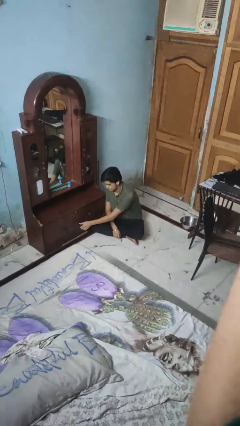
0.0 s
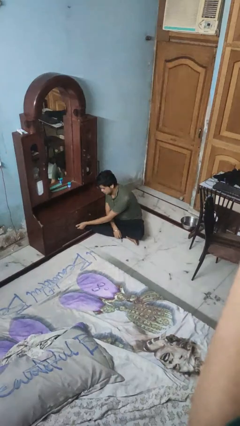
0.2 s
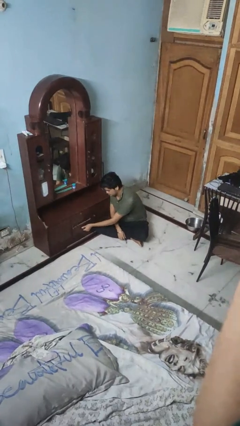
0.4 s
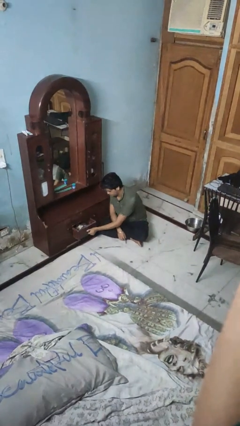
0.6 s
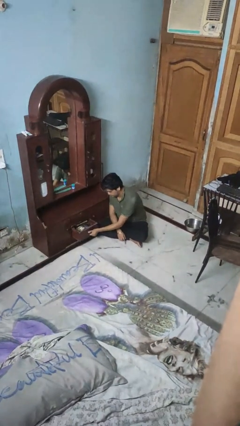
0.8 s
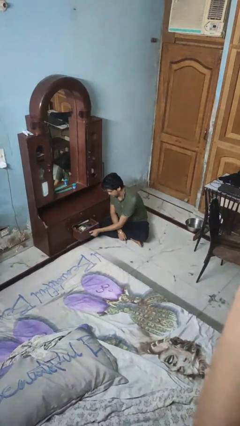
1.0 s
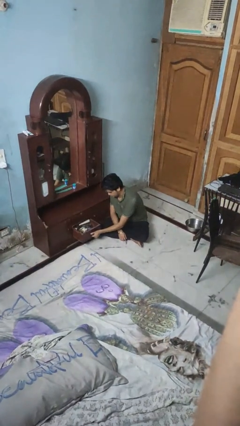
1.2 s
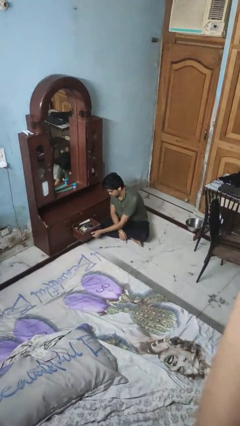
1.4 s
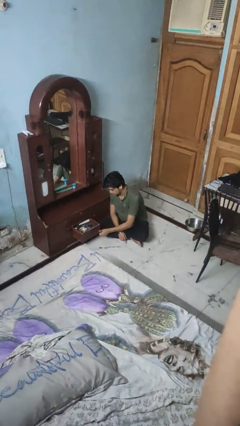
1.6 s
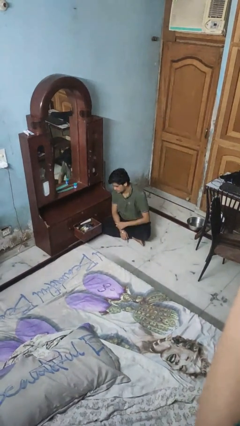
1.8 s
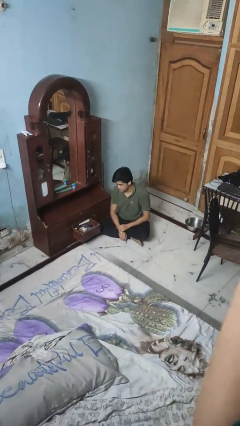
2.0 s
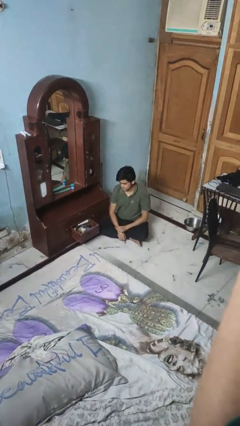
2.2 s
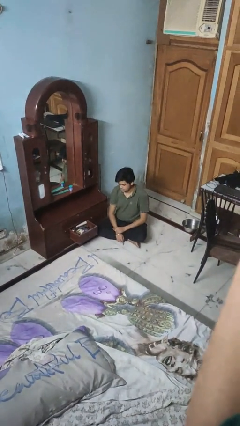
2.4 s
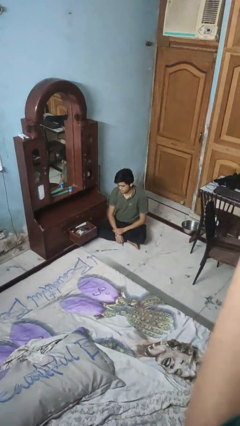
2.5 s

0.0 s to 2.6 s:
person opens dresser drawer

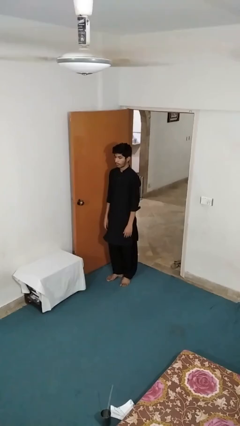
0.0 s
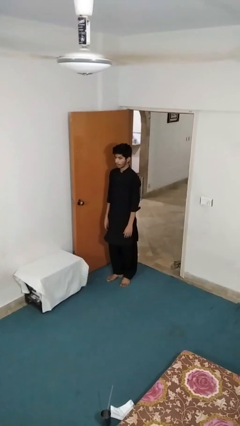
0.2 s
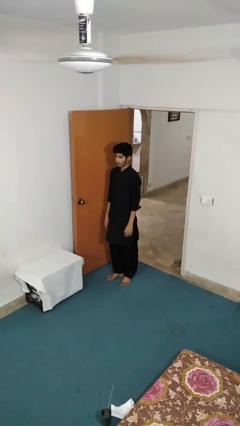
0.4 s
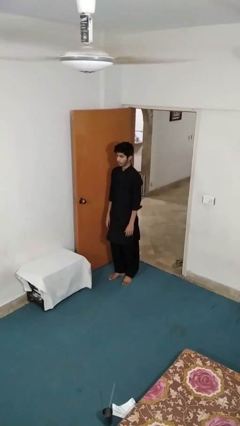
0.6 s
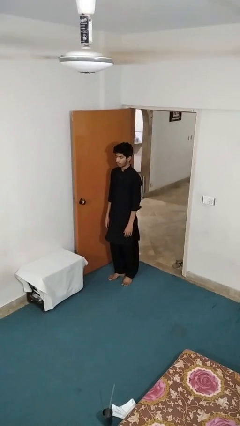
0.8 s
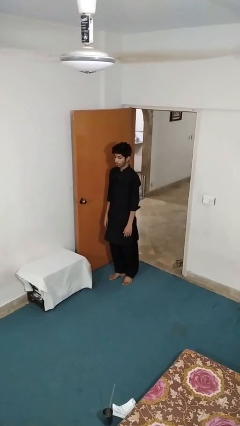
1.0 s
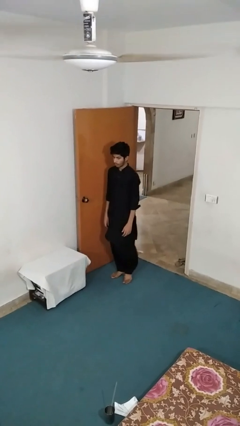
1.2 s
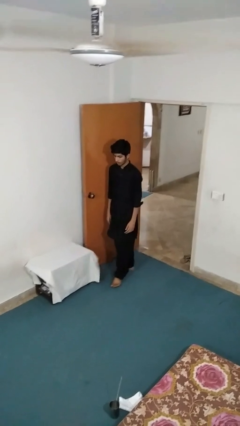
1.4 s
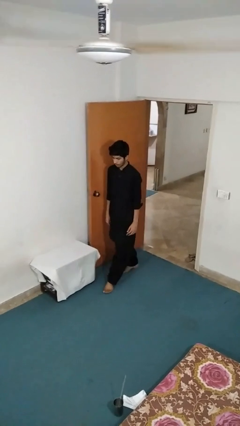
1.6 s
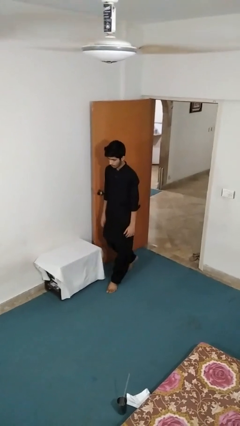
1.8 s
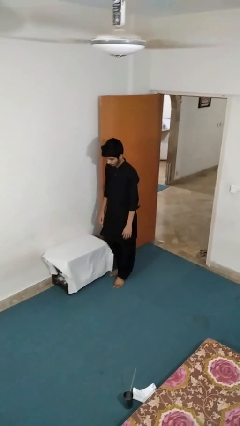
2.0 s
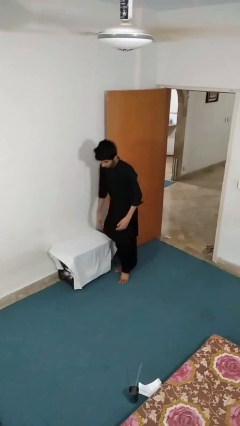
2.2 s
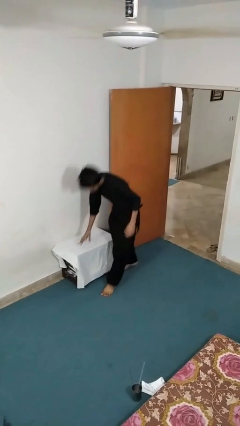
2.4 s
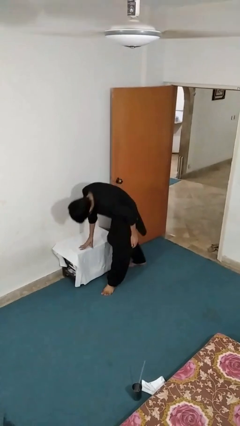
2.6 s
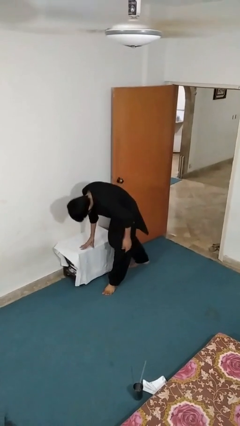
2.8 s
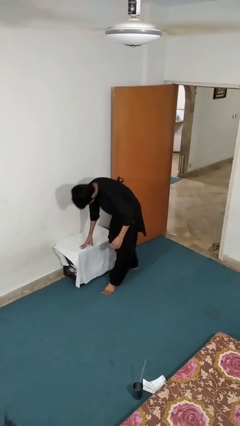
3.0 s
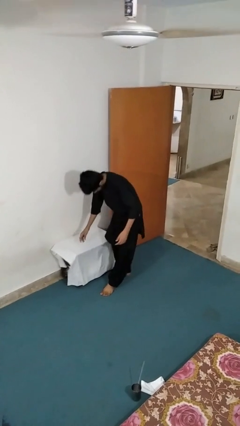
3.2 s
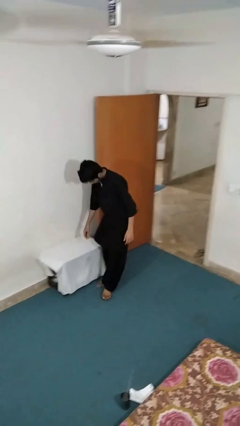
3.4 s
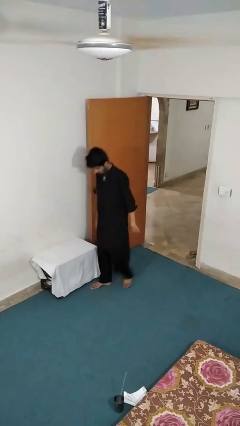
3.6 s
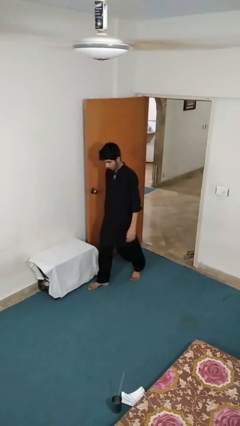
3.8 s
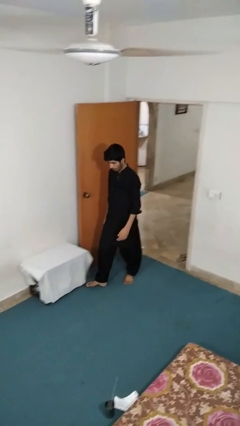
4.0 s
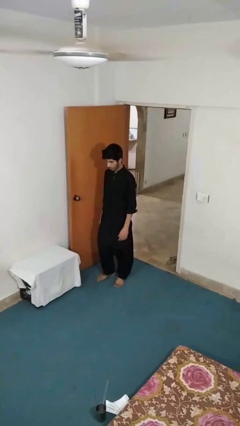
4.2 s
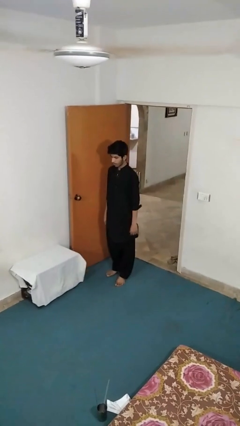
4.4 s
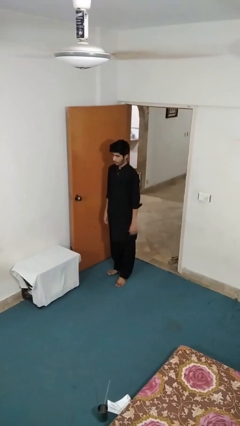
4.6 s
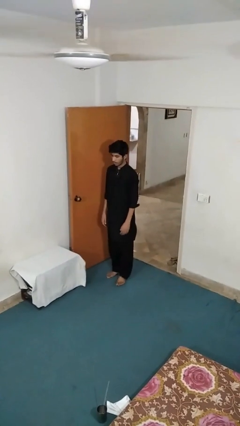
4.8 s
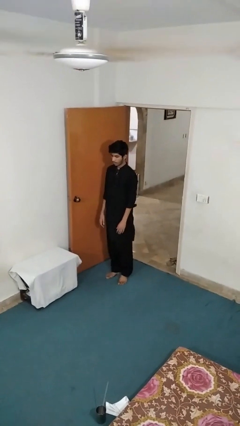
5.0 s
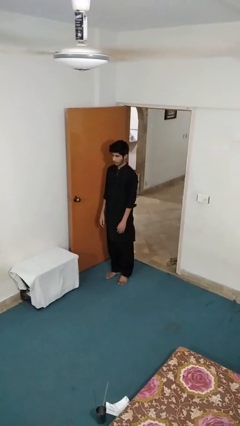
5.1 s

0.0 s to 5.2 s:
person bumps into table

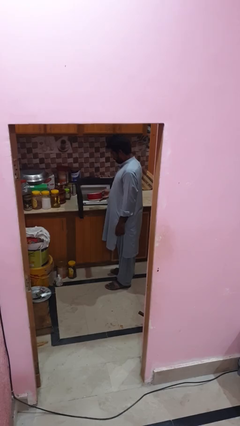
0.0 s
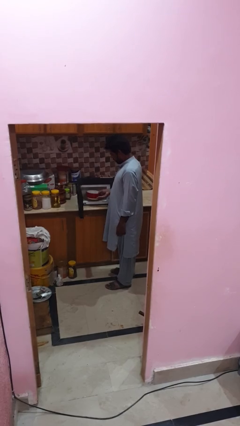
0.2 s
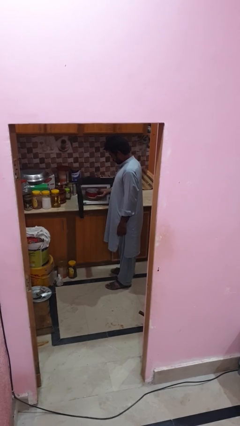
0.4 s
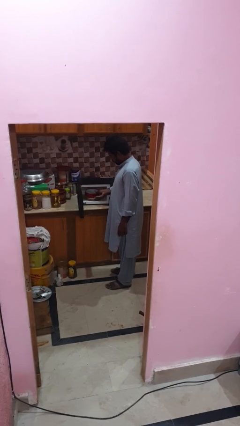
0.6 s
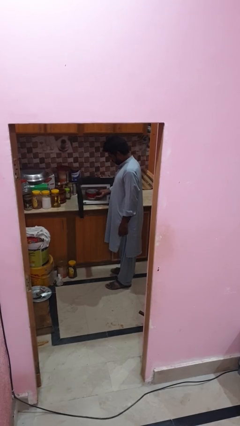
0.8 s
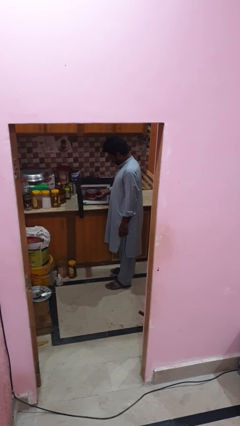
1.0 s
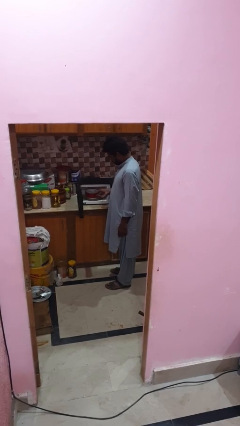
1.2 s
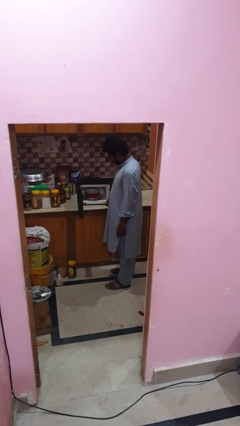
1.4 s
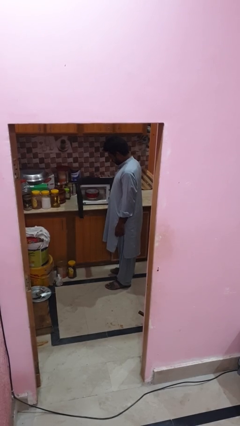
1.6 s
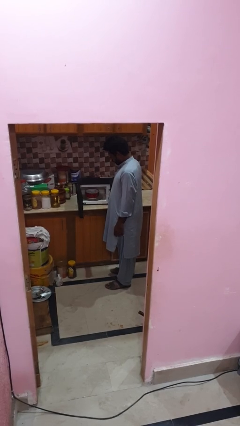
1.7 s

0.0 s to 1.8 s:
person puts object into microwave

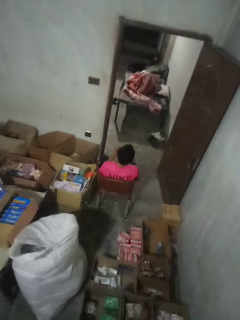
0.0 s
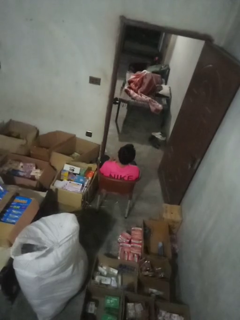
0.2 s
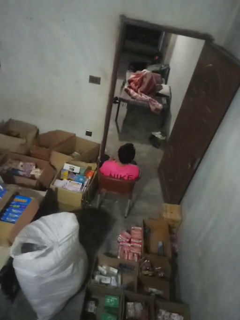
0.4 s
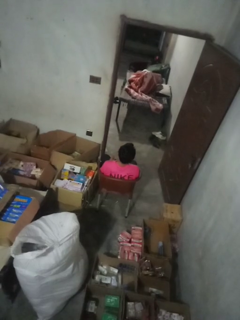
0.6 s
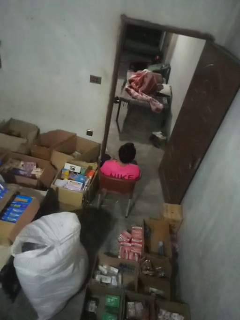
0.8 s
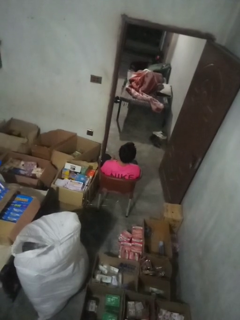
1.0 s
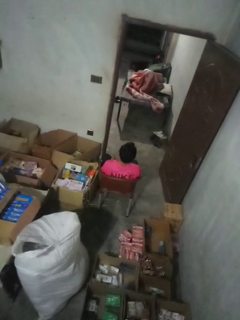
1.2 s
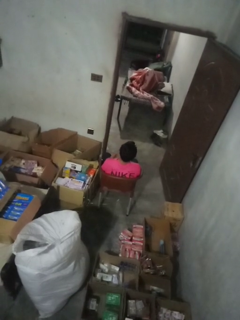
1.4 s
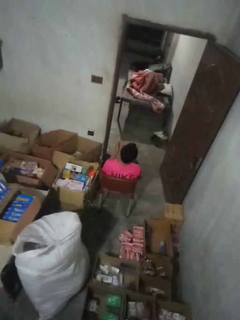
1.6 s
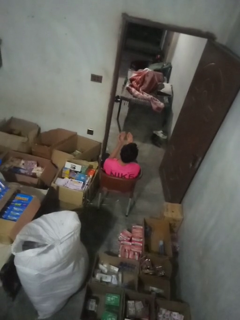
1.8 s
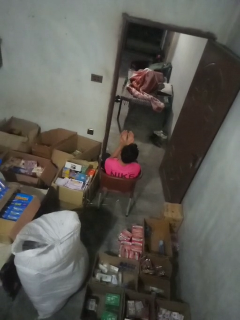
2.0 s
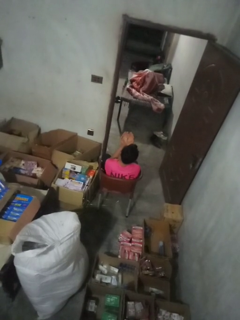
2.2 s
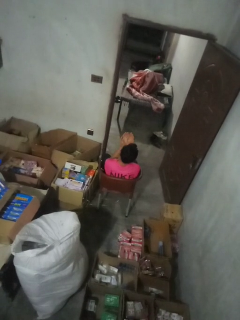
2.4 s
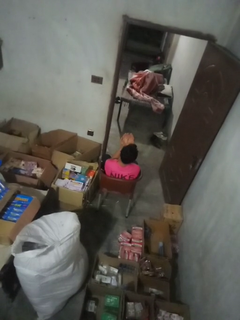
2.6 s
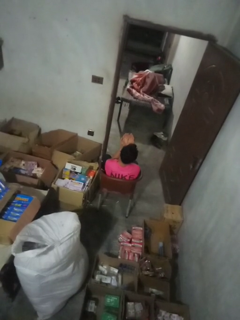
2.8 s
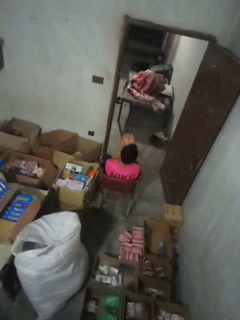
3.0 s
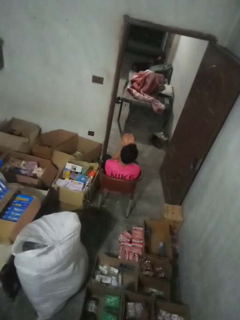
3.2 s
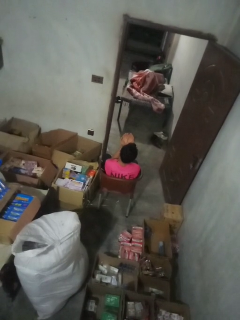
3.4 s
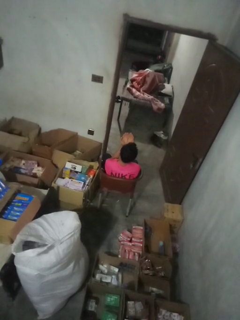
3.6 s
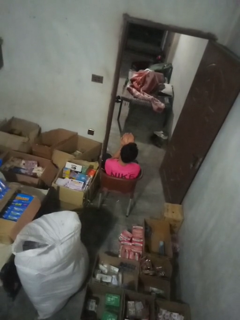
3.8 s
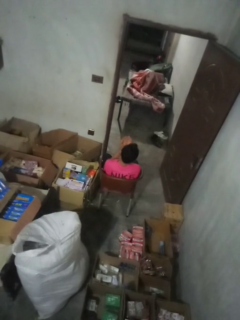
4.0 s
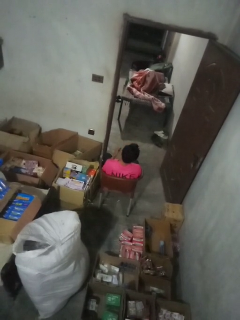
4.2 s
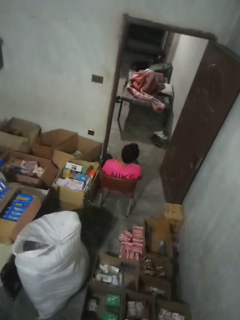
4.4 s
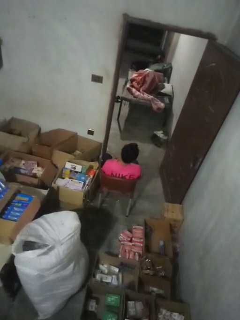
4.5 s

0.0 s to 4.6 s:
person prays

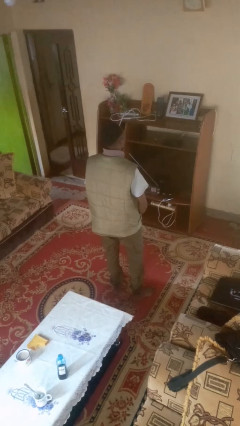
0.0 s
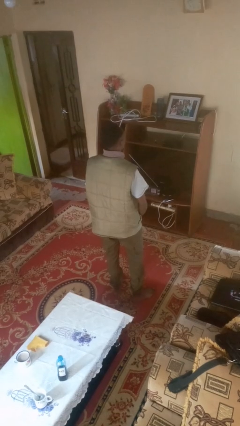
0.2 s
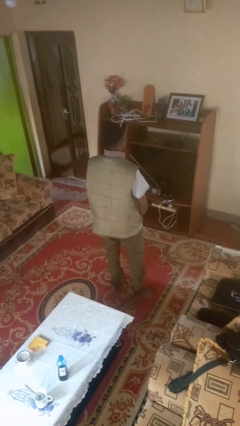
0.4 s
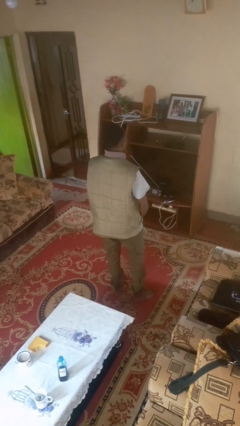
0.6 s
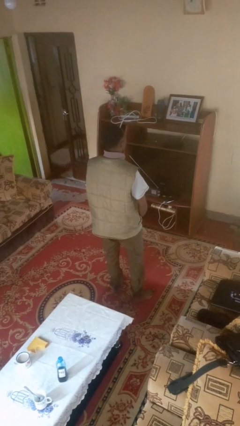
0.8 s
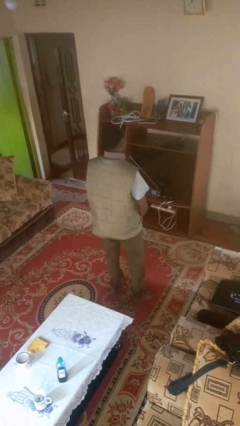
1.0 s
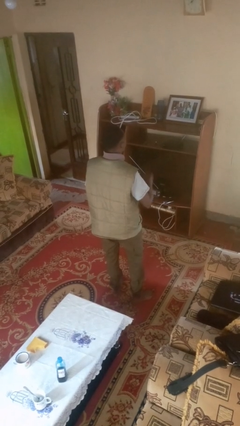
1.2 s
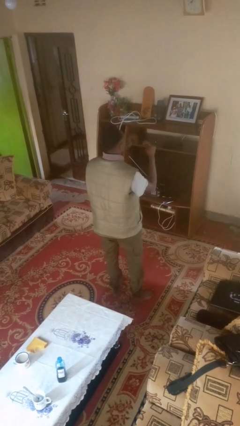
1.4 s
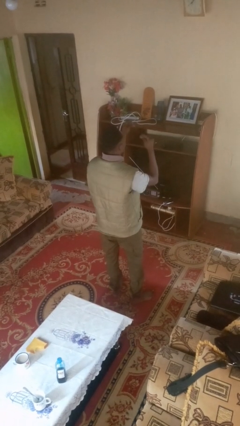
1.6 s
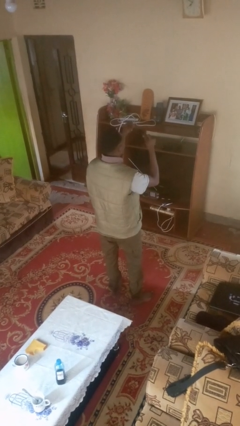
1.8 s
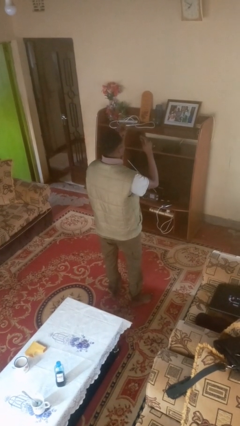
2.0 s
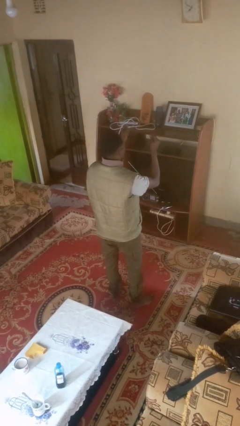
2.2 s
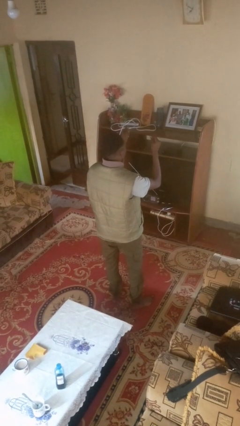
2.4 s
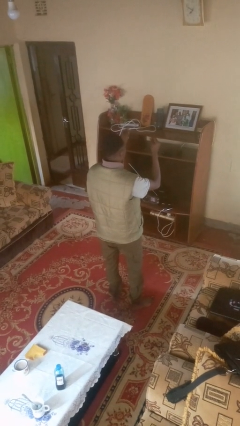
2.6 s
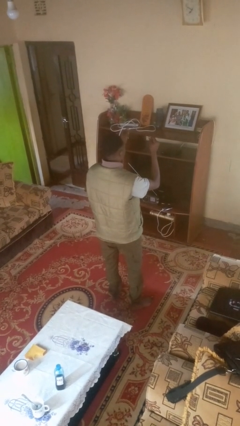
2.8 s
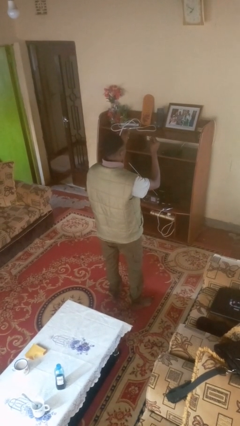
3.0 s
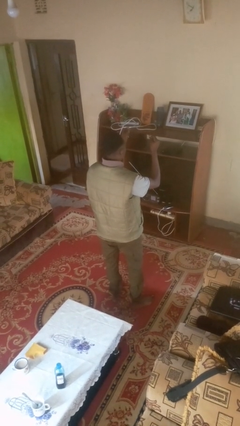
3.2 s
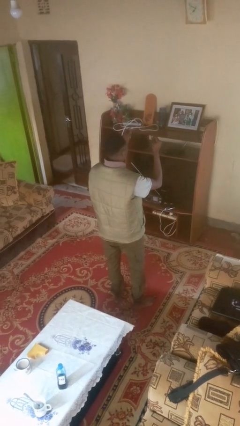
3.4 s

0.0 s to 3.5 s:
person snaps fingers

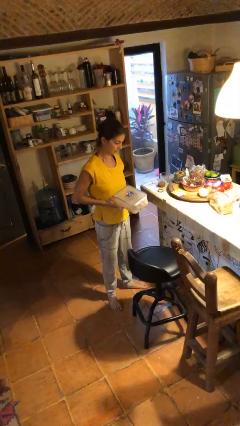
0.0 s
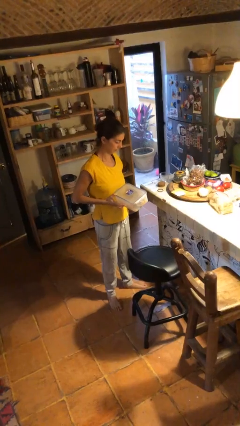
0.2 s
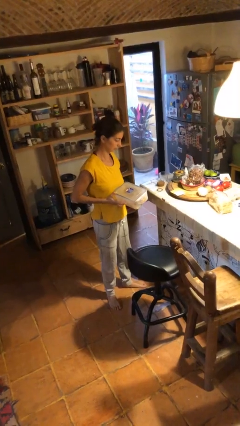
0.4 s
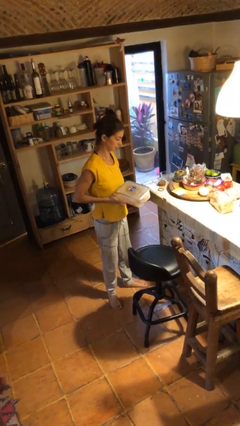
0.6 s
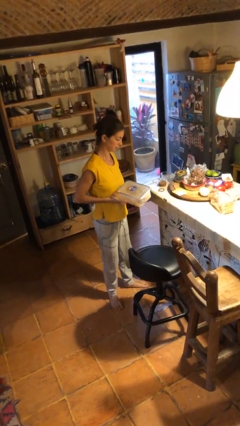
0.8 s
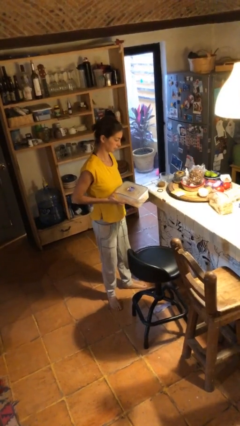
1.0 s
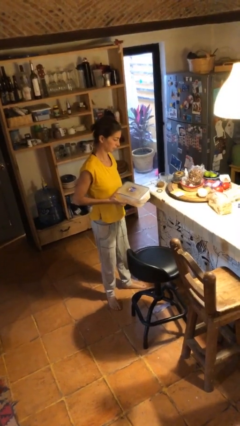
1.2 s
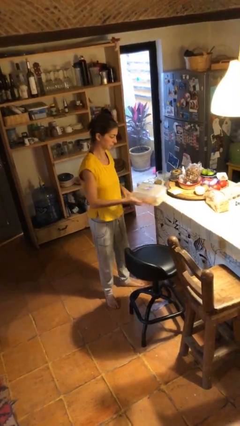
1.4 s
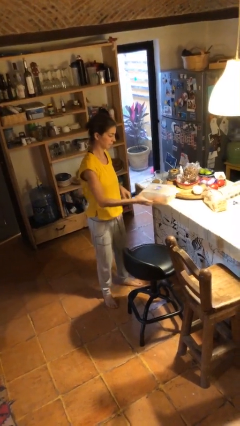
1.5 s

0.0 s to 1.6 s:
person puts down object on table
